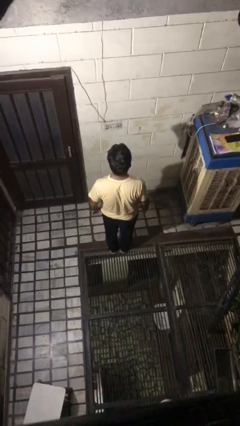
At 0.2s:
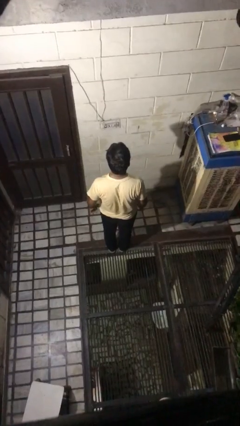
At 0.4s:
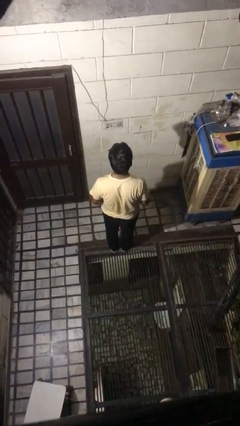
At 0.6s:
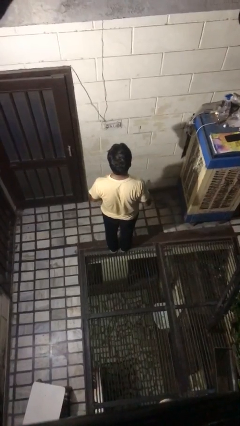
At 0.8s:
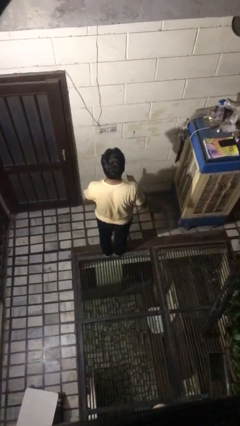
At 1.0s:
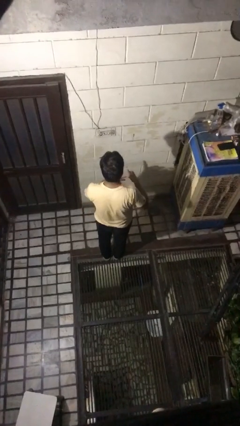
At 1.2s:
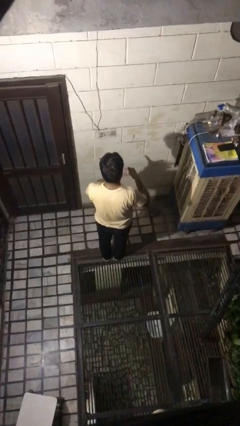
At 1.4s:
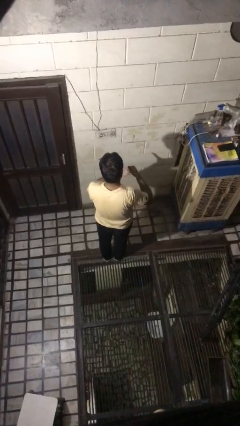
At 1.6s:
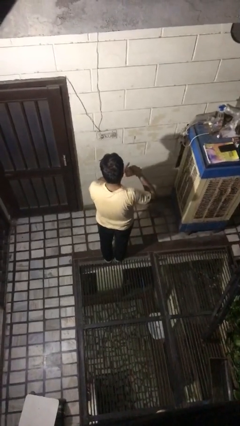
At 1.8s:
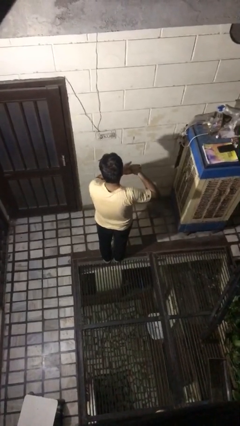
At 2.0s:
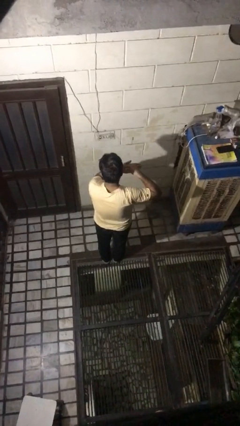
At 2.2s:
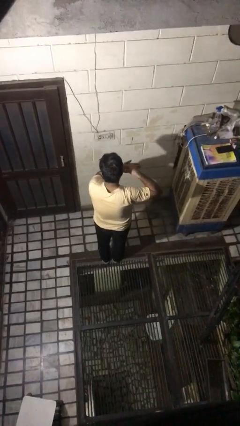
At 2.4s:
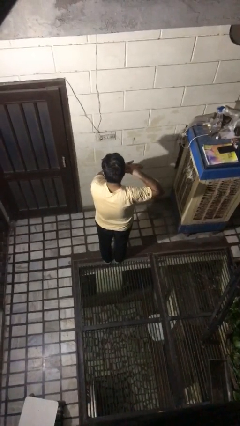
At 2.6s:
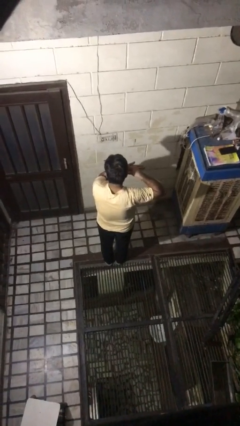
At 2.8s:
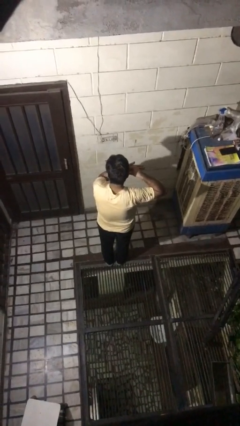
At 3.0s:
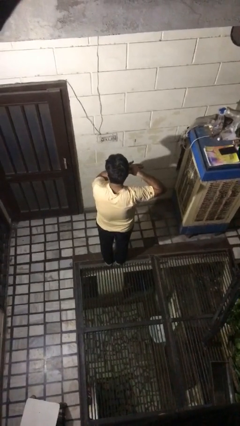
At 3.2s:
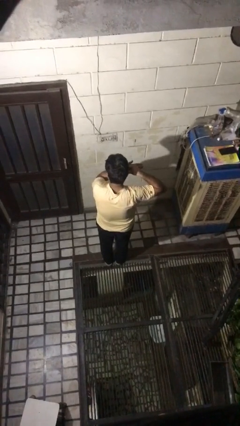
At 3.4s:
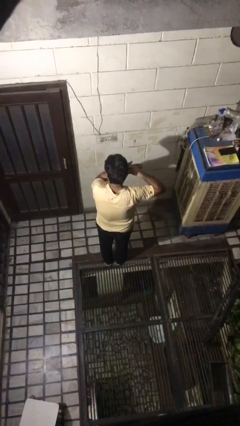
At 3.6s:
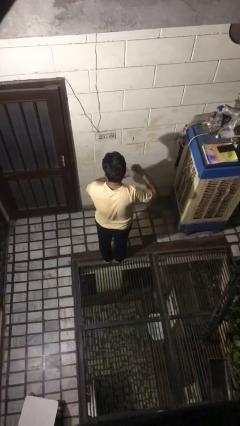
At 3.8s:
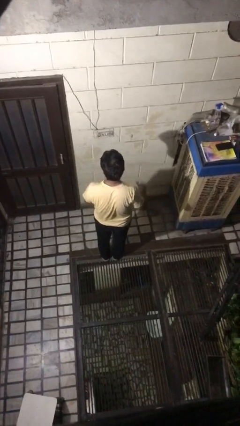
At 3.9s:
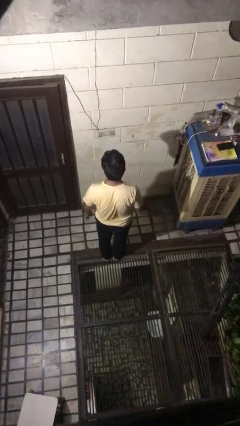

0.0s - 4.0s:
person gestures call me

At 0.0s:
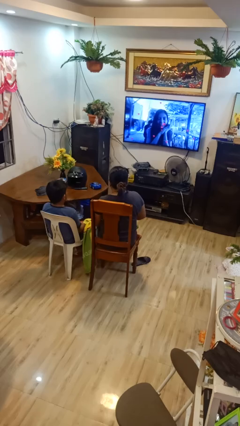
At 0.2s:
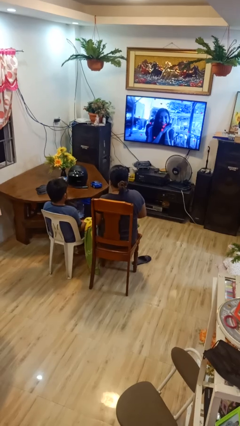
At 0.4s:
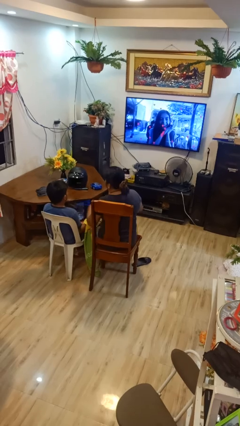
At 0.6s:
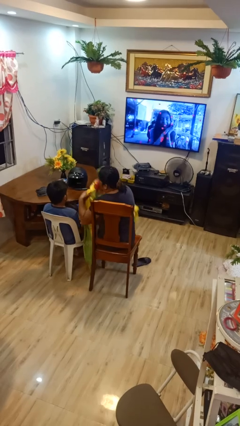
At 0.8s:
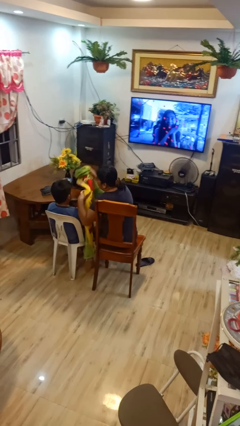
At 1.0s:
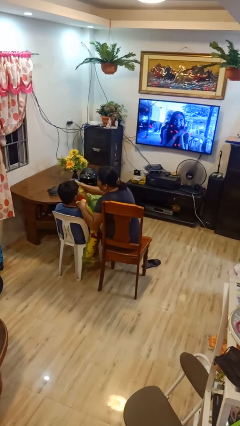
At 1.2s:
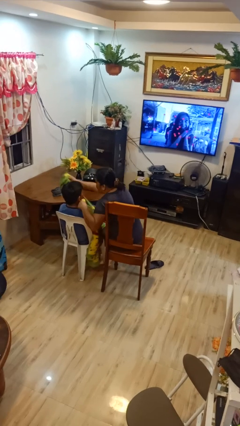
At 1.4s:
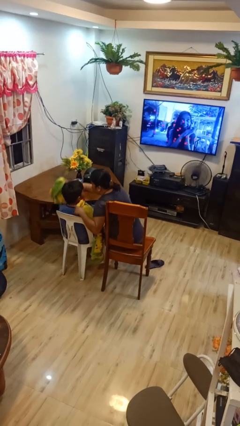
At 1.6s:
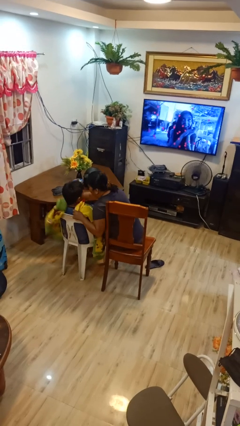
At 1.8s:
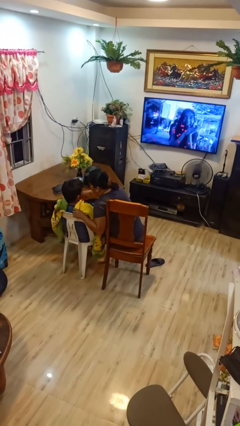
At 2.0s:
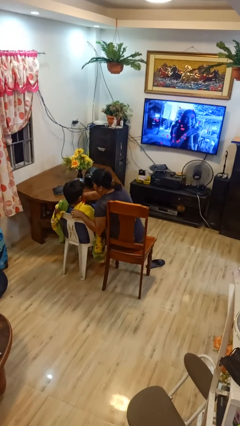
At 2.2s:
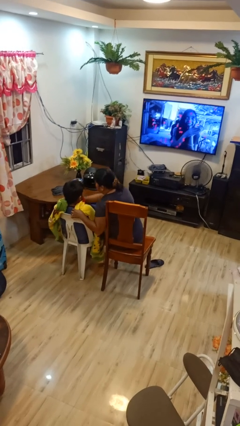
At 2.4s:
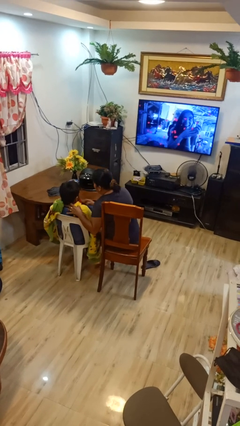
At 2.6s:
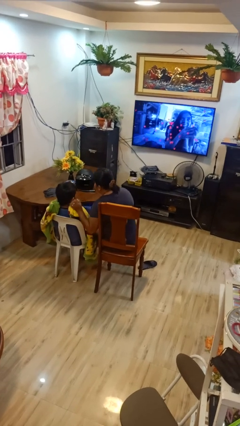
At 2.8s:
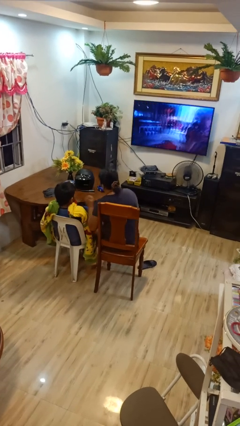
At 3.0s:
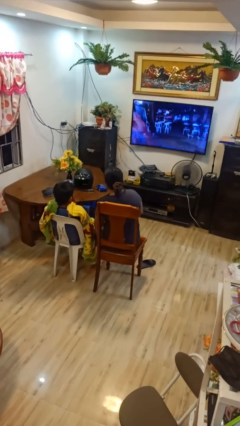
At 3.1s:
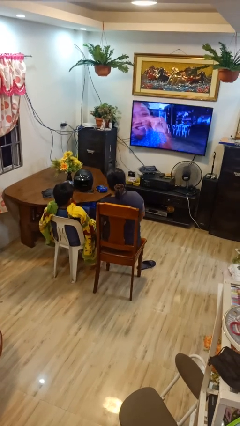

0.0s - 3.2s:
person covers friend with blanket

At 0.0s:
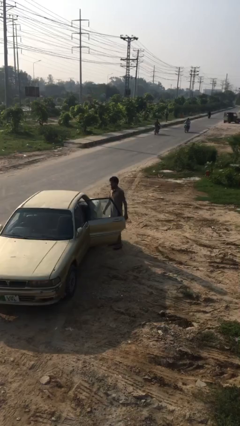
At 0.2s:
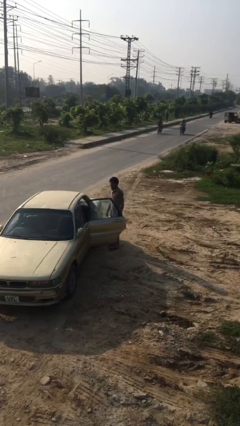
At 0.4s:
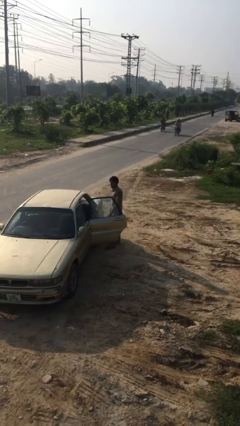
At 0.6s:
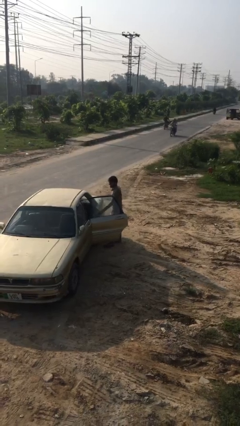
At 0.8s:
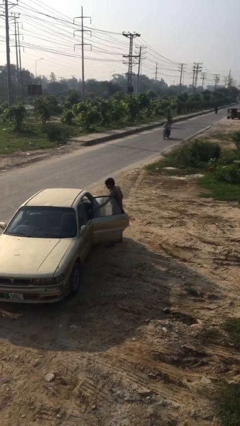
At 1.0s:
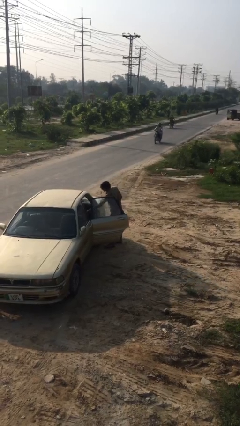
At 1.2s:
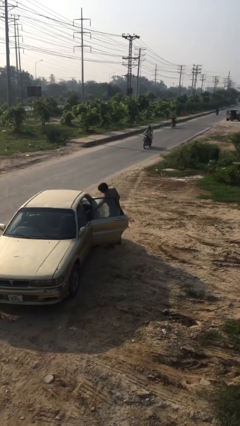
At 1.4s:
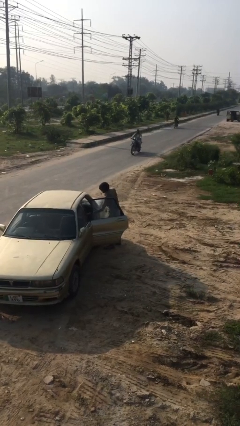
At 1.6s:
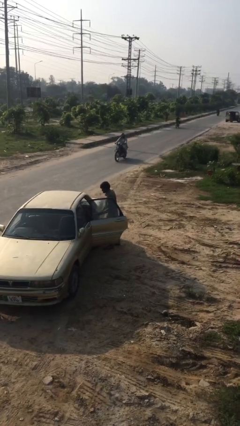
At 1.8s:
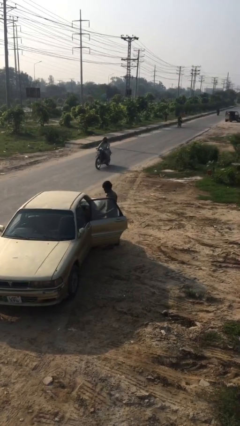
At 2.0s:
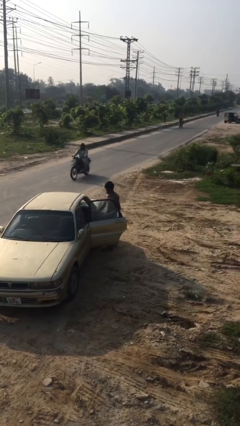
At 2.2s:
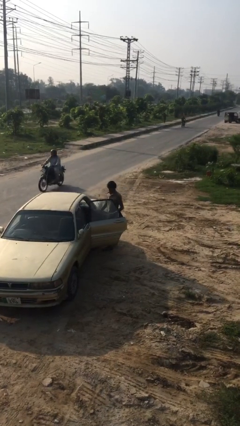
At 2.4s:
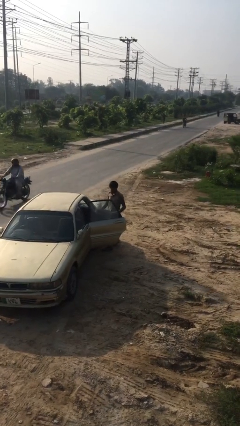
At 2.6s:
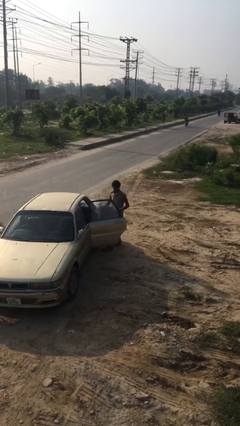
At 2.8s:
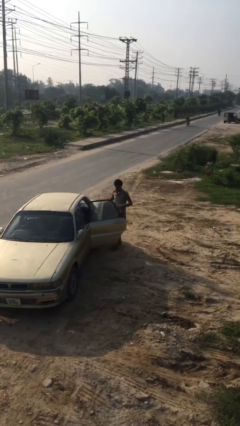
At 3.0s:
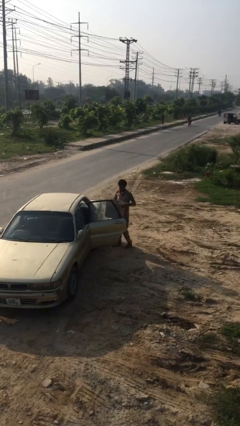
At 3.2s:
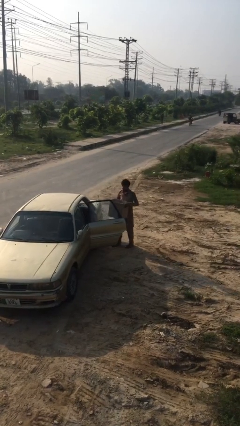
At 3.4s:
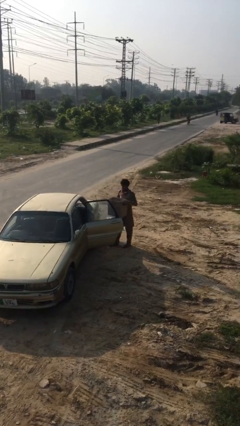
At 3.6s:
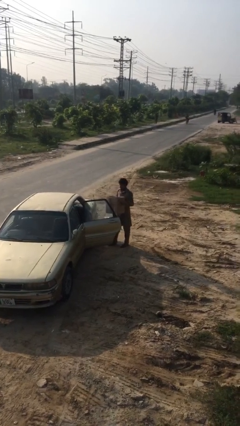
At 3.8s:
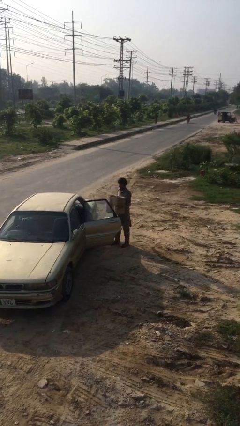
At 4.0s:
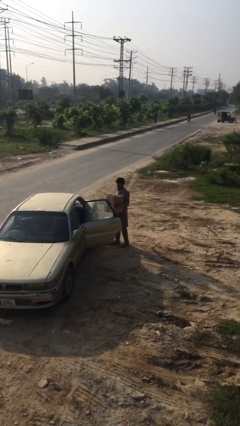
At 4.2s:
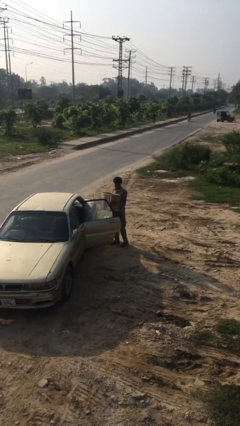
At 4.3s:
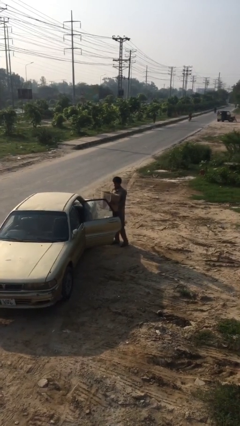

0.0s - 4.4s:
person unloads car

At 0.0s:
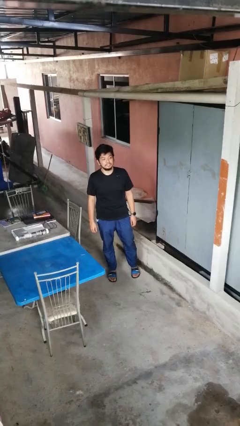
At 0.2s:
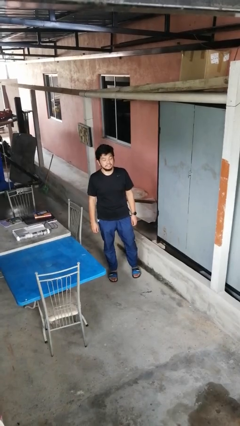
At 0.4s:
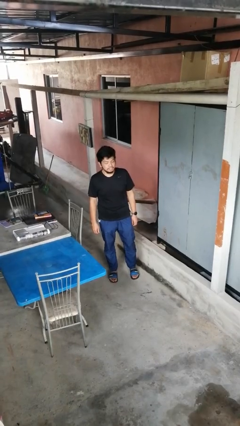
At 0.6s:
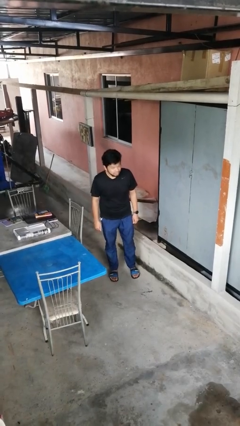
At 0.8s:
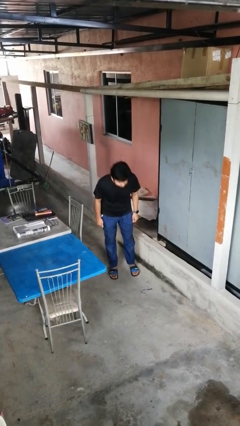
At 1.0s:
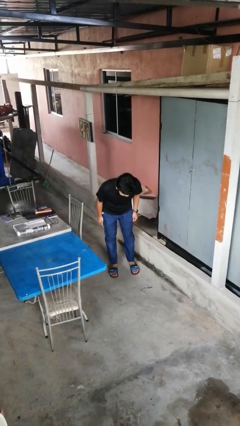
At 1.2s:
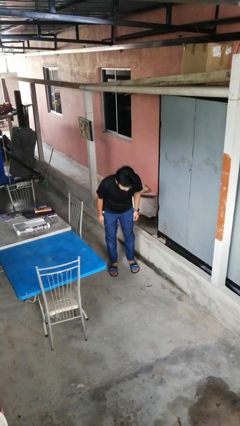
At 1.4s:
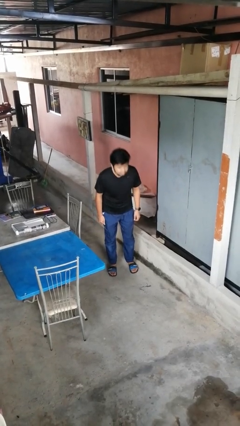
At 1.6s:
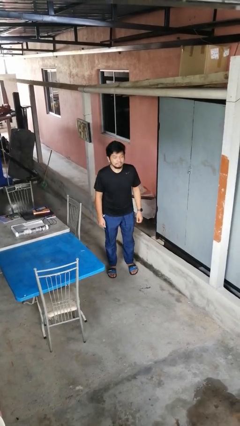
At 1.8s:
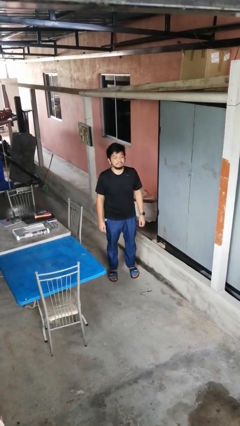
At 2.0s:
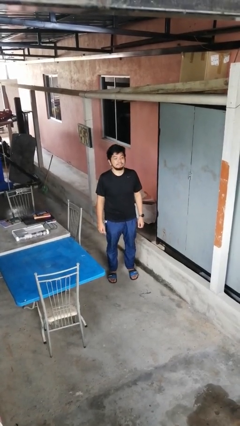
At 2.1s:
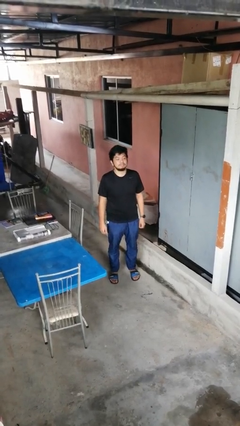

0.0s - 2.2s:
person bows

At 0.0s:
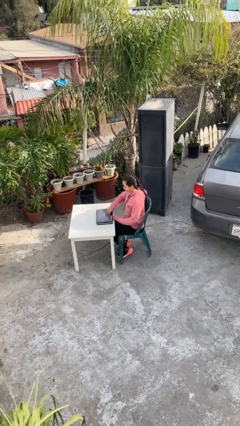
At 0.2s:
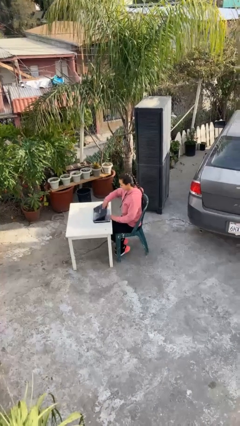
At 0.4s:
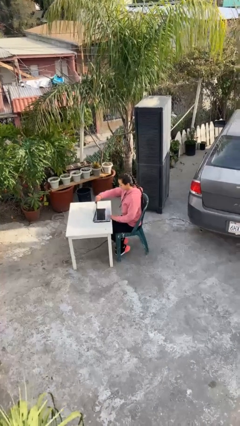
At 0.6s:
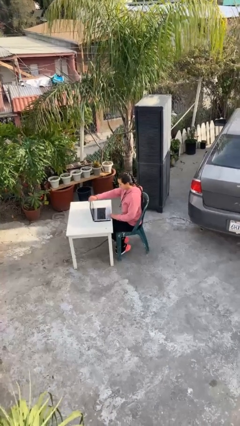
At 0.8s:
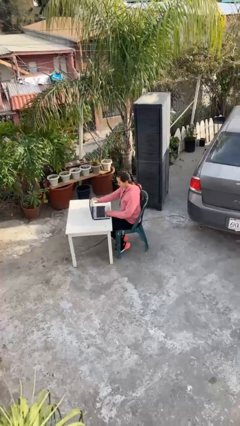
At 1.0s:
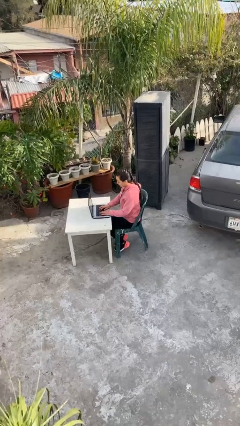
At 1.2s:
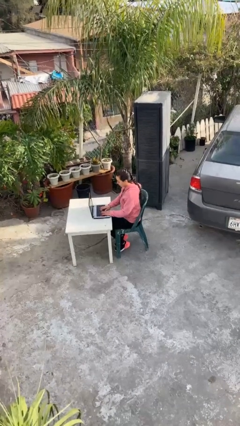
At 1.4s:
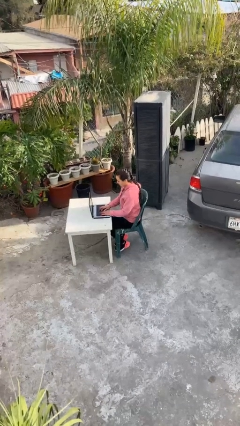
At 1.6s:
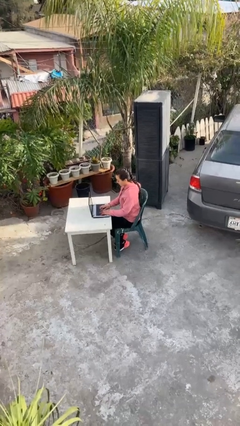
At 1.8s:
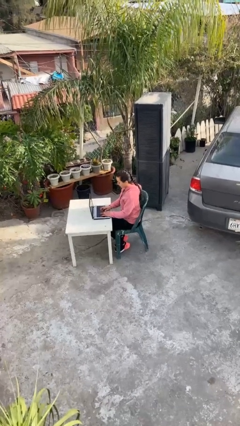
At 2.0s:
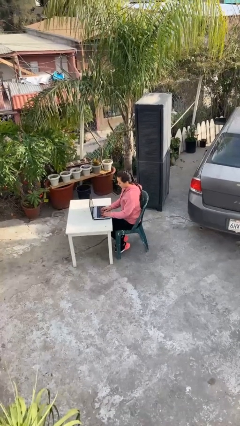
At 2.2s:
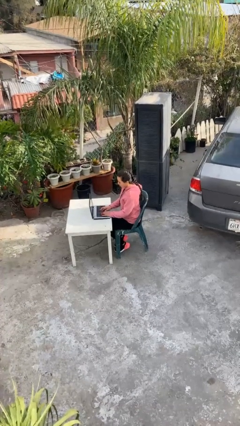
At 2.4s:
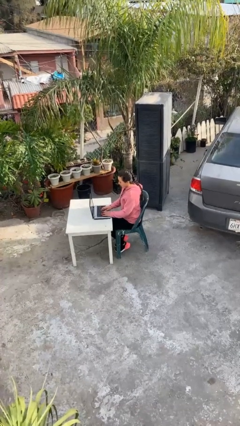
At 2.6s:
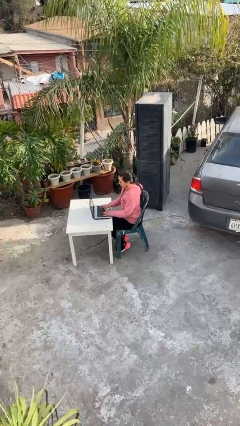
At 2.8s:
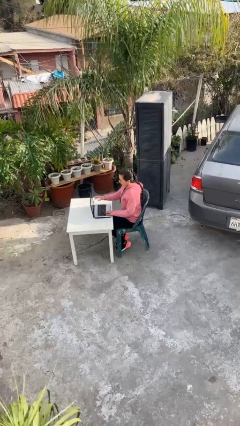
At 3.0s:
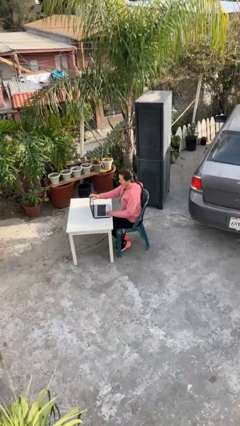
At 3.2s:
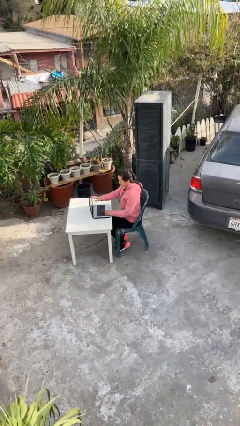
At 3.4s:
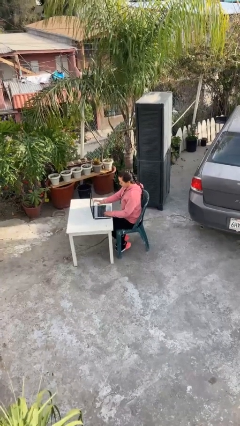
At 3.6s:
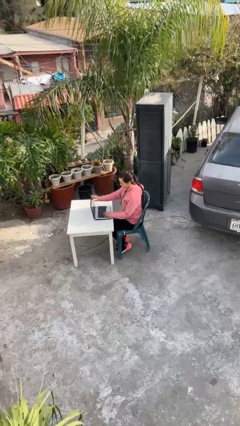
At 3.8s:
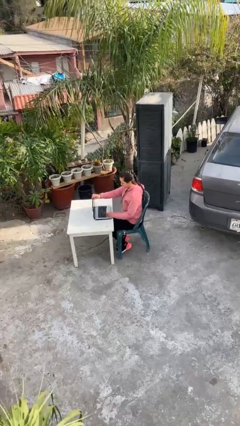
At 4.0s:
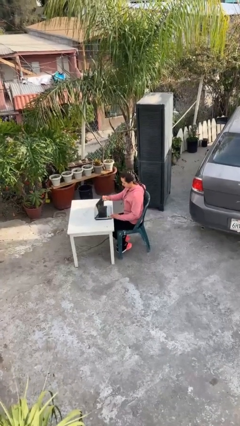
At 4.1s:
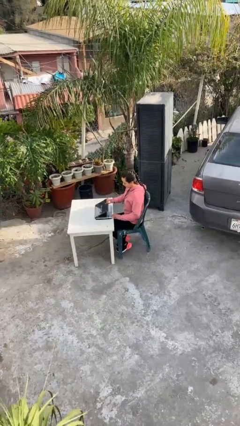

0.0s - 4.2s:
person interacts with laptop
